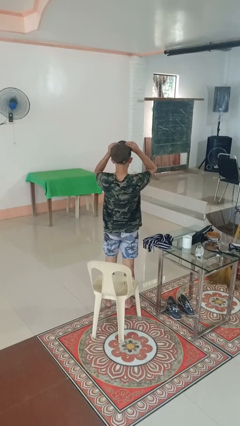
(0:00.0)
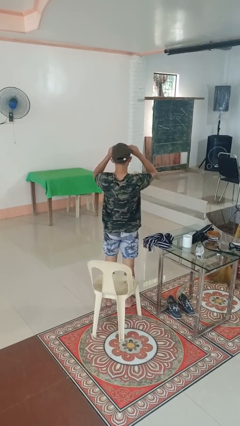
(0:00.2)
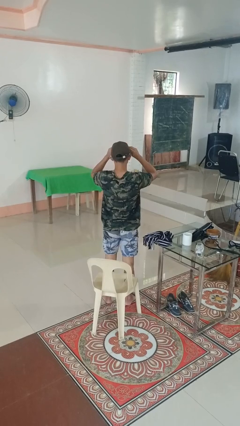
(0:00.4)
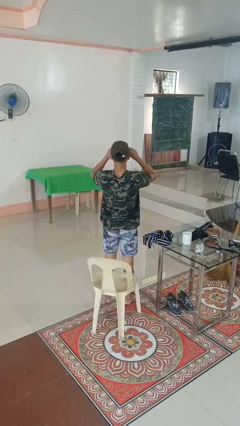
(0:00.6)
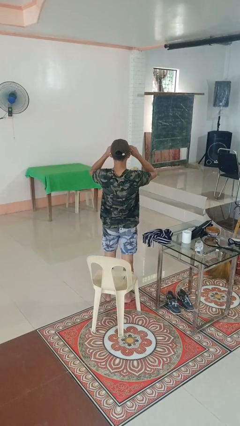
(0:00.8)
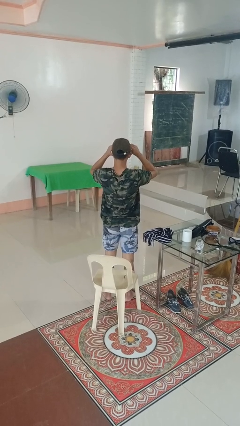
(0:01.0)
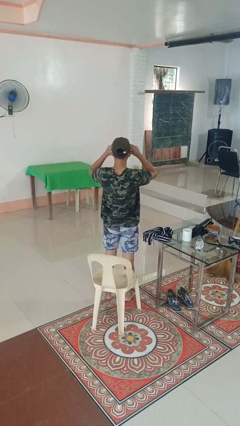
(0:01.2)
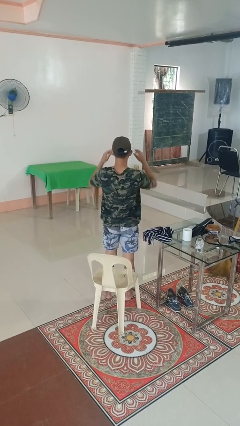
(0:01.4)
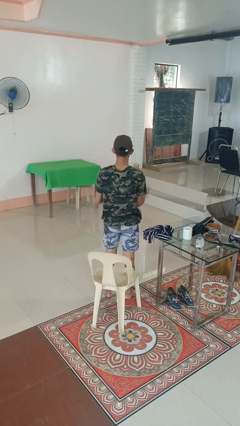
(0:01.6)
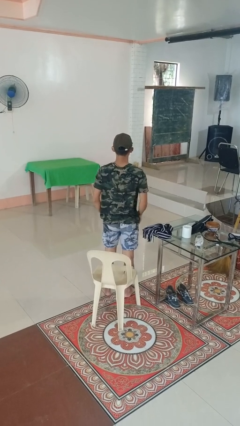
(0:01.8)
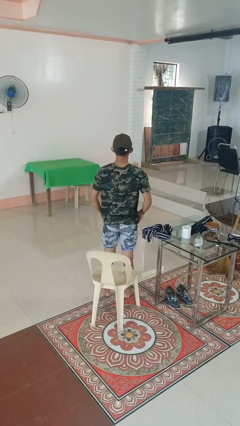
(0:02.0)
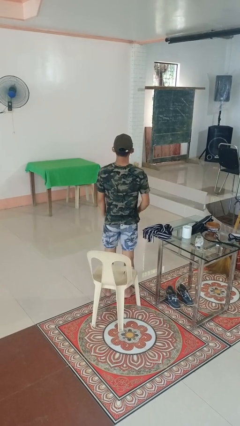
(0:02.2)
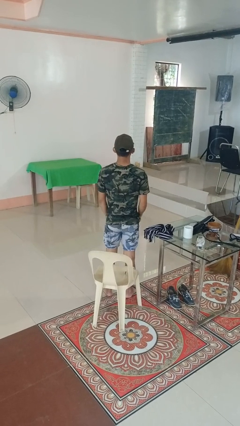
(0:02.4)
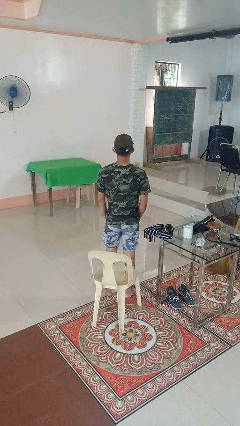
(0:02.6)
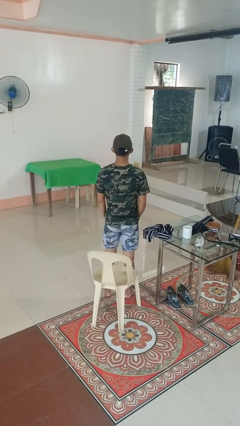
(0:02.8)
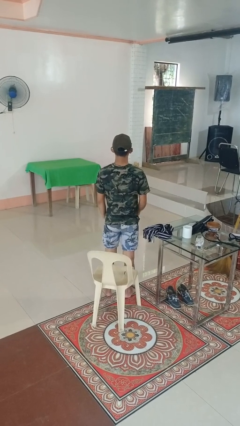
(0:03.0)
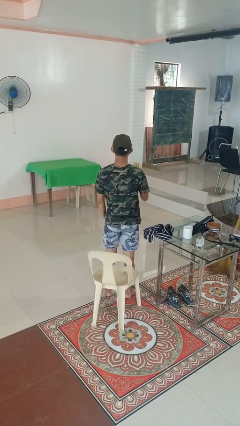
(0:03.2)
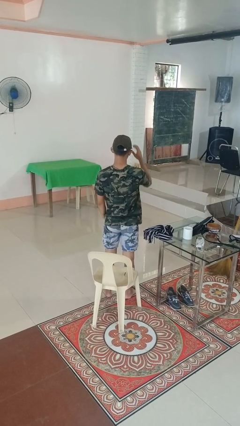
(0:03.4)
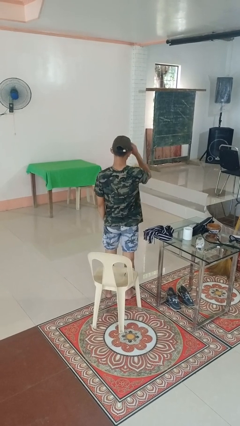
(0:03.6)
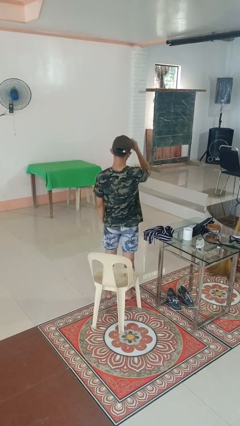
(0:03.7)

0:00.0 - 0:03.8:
person puts on hat

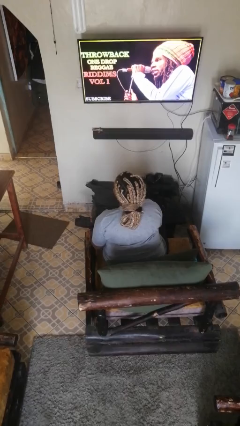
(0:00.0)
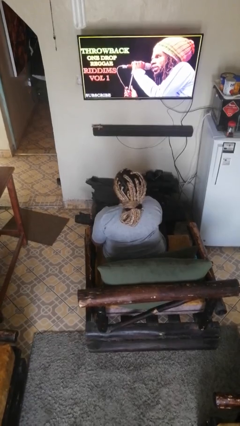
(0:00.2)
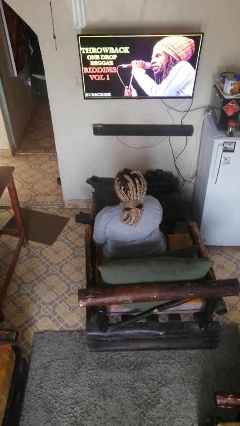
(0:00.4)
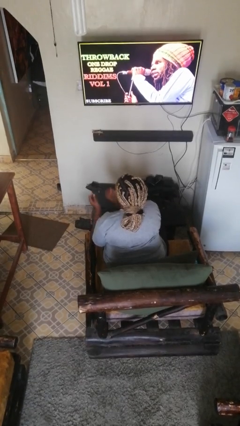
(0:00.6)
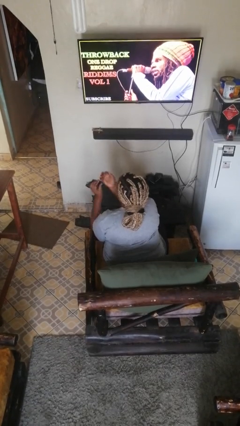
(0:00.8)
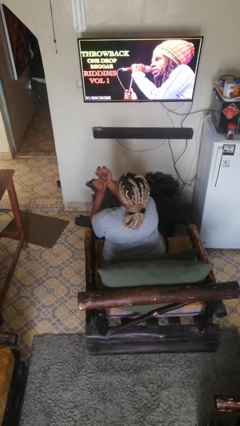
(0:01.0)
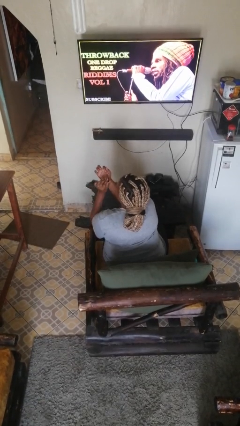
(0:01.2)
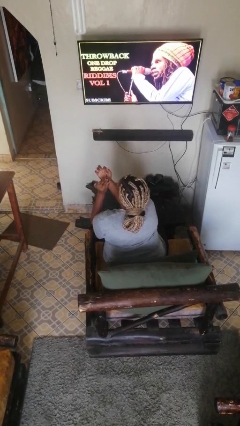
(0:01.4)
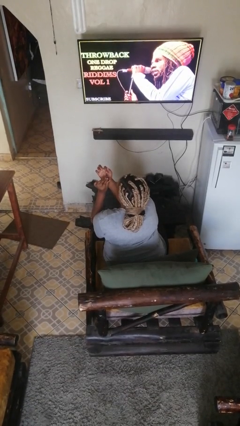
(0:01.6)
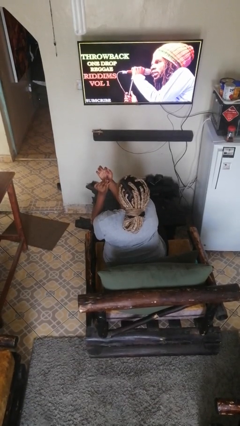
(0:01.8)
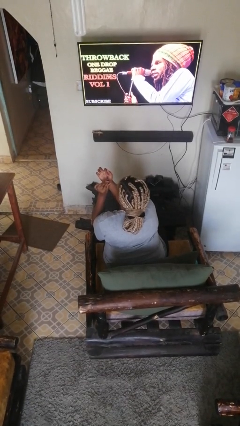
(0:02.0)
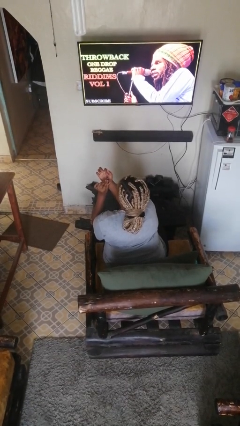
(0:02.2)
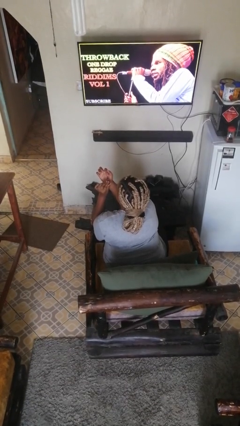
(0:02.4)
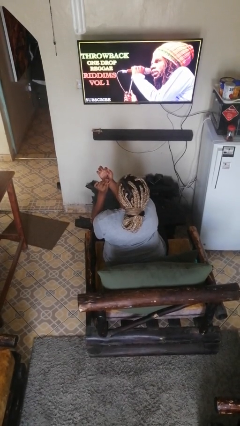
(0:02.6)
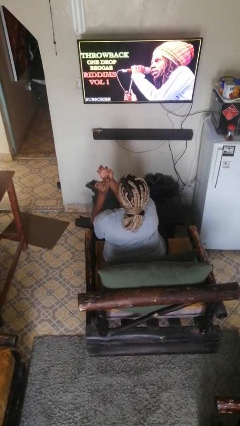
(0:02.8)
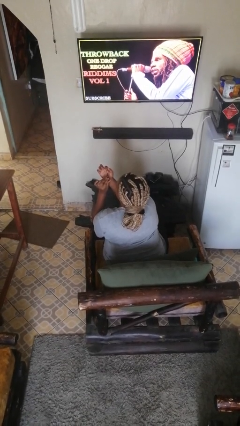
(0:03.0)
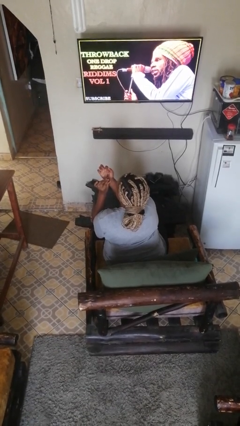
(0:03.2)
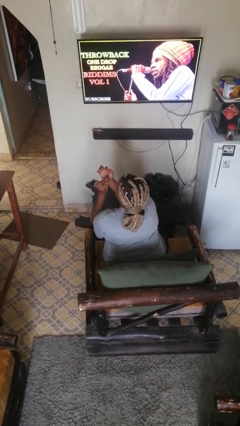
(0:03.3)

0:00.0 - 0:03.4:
person paints fingernails

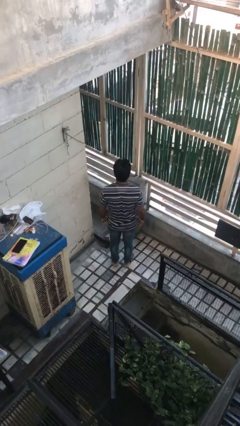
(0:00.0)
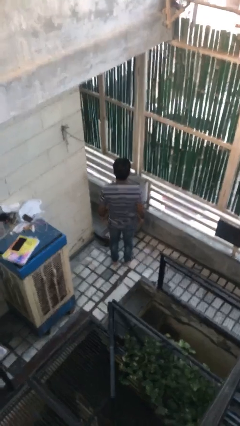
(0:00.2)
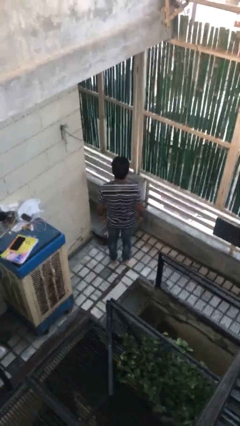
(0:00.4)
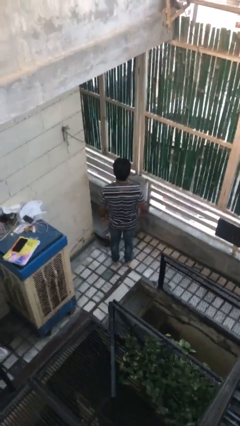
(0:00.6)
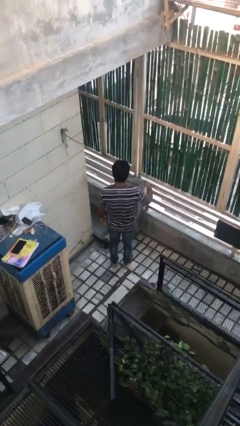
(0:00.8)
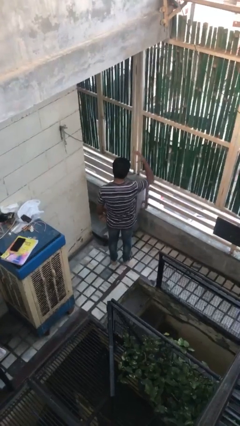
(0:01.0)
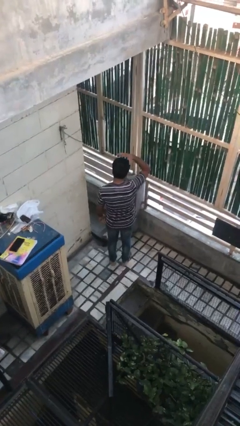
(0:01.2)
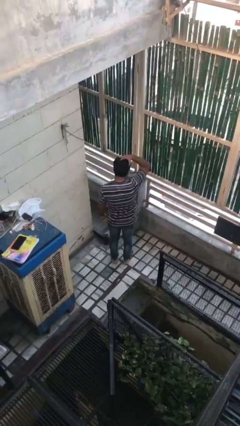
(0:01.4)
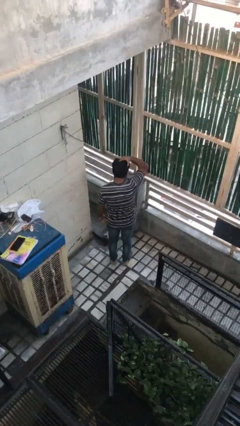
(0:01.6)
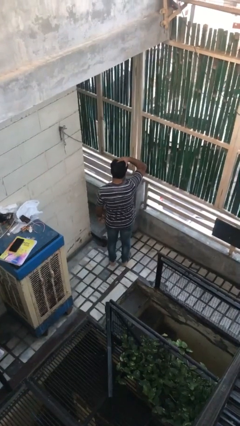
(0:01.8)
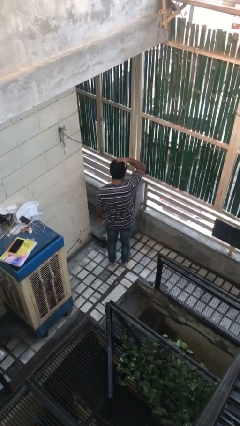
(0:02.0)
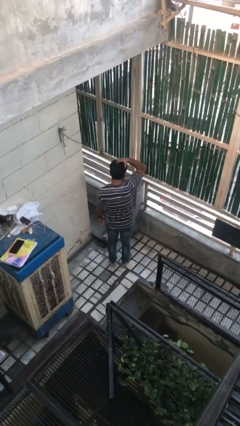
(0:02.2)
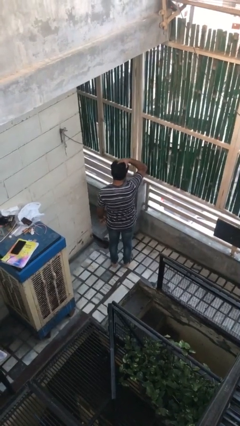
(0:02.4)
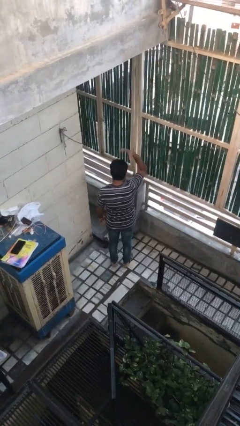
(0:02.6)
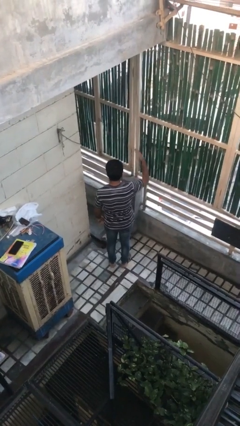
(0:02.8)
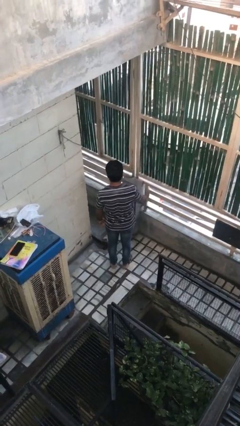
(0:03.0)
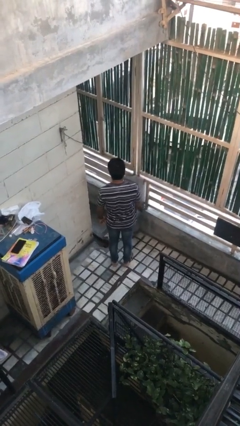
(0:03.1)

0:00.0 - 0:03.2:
person pats head

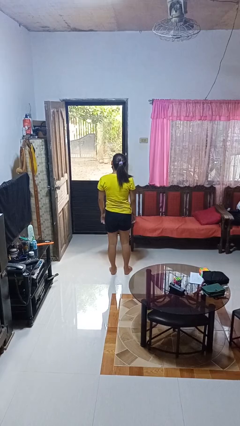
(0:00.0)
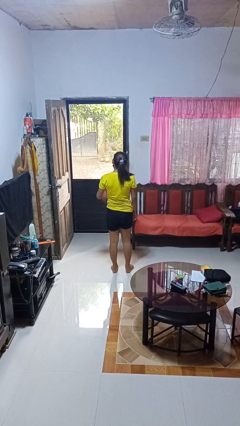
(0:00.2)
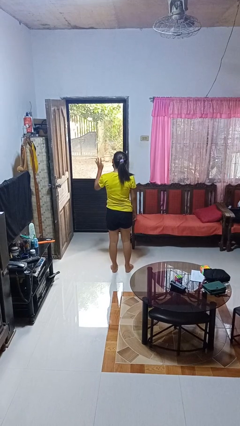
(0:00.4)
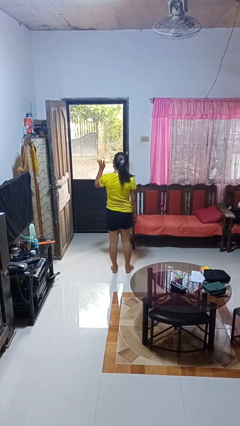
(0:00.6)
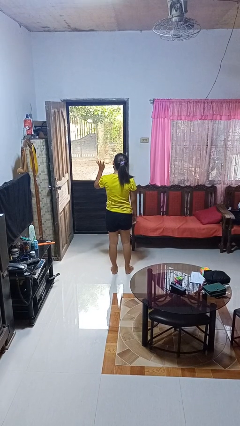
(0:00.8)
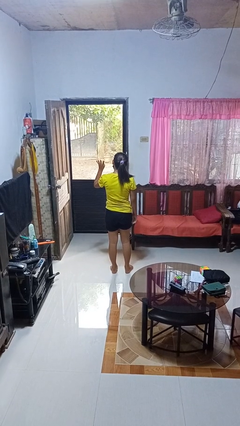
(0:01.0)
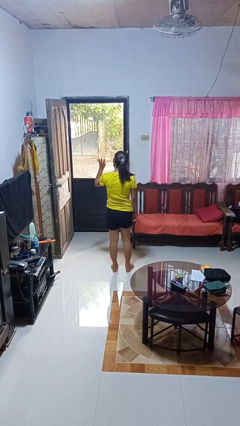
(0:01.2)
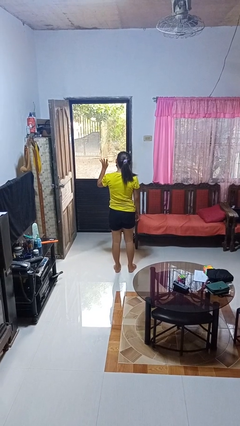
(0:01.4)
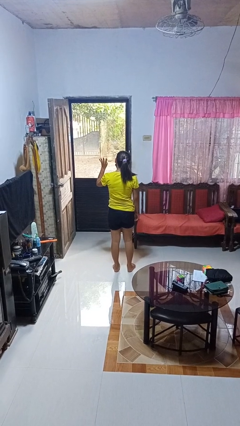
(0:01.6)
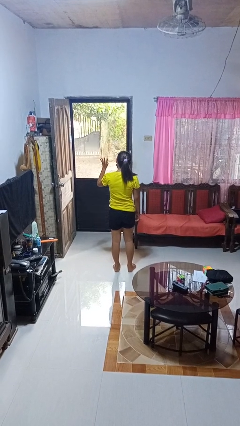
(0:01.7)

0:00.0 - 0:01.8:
person gestures number four

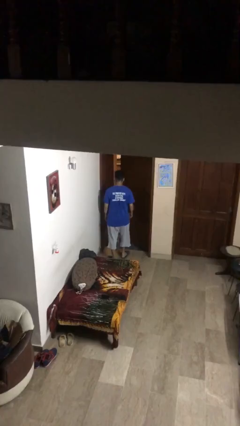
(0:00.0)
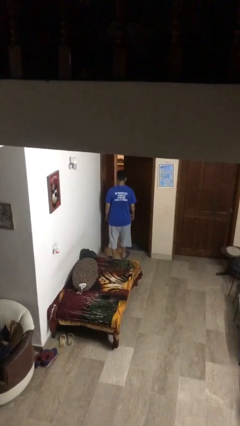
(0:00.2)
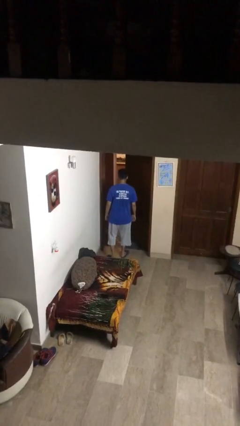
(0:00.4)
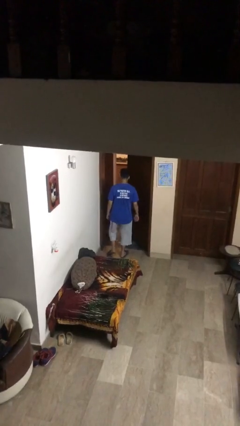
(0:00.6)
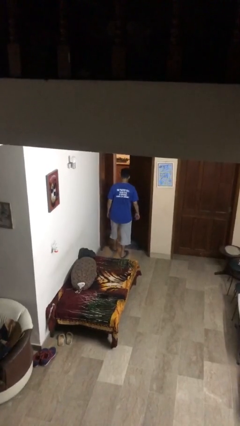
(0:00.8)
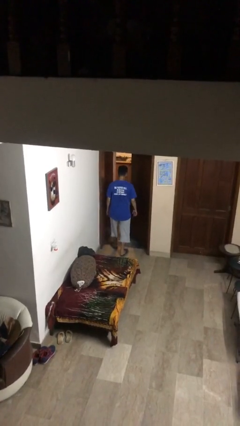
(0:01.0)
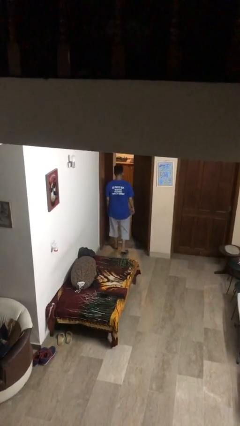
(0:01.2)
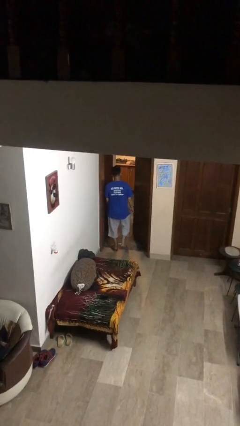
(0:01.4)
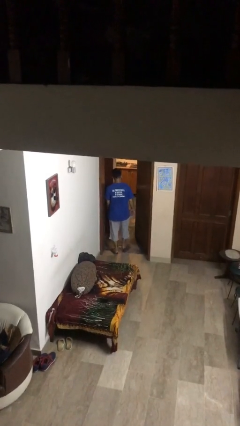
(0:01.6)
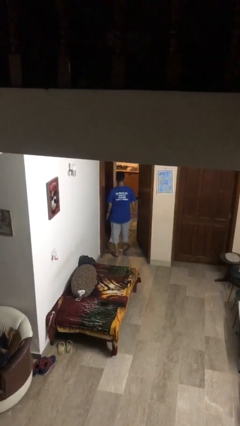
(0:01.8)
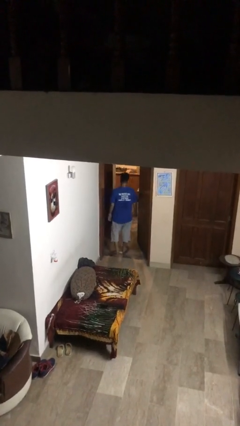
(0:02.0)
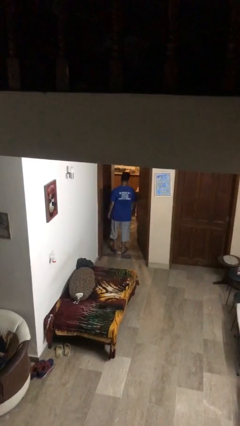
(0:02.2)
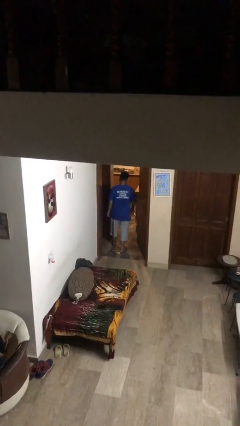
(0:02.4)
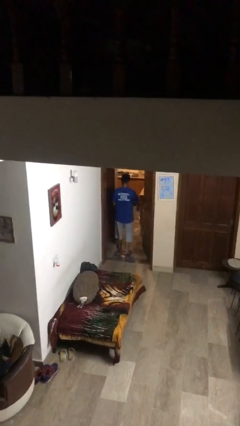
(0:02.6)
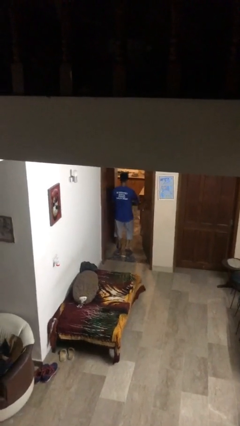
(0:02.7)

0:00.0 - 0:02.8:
person exits scene through structure

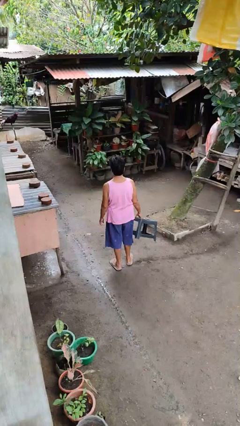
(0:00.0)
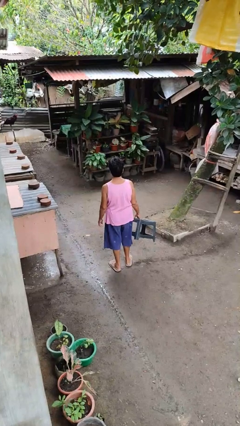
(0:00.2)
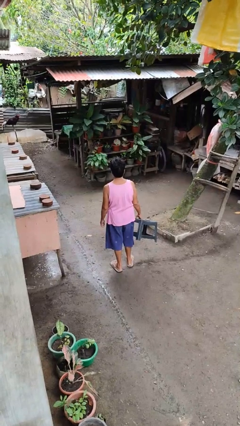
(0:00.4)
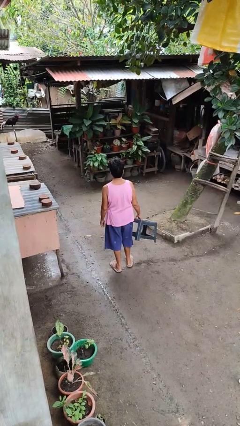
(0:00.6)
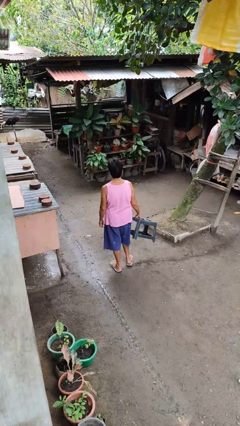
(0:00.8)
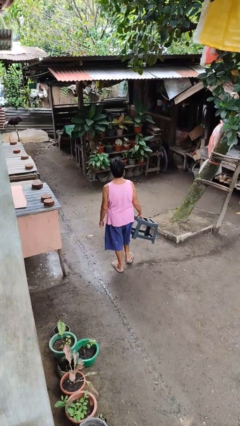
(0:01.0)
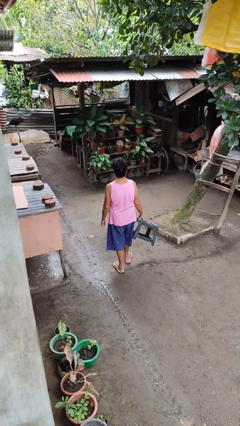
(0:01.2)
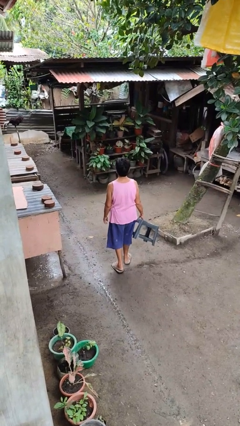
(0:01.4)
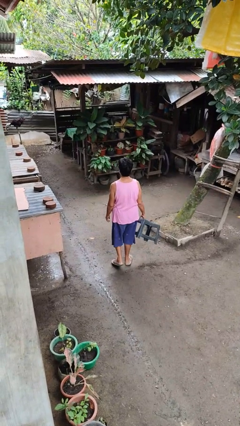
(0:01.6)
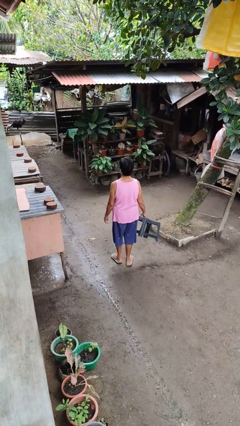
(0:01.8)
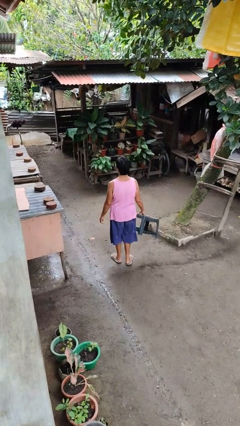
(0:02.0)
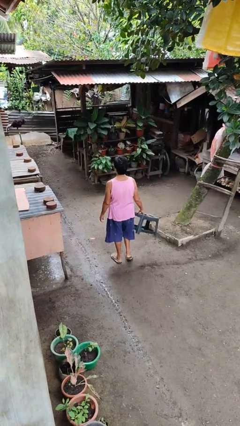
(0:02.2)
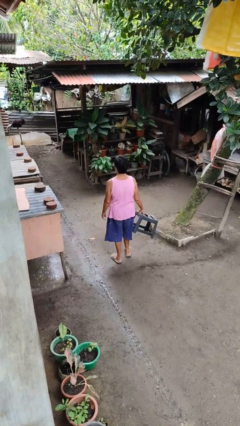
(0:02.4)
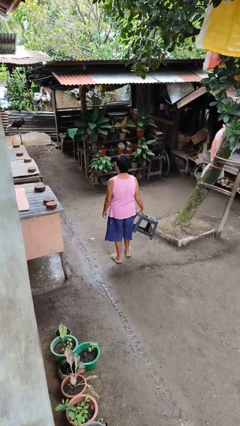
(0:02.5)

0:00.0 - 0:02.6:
person carries furniture
